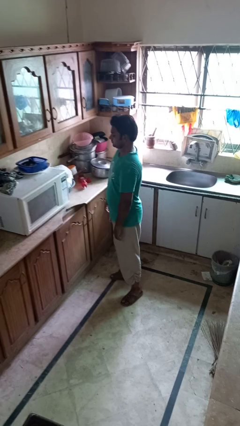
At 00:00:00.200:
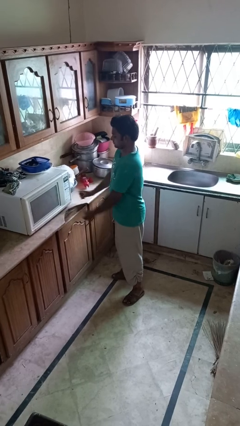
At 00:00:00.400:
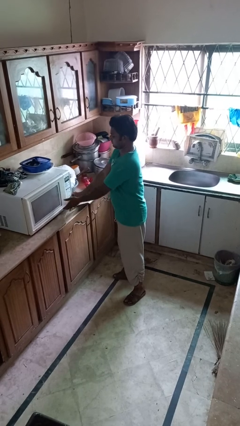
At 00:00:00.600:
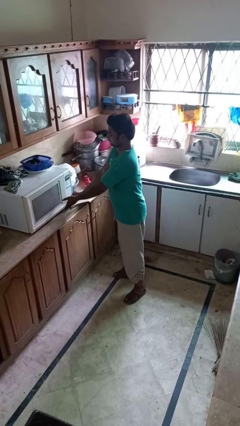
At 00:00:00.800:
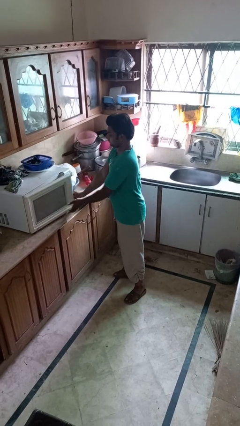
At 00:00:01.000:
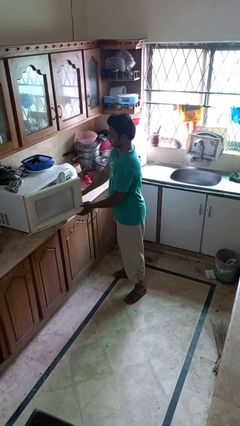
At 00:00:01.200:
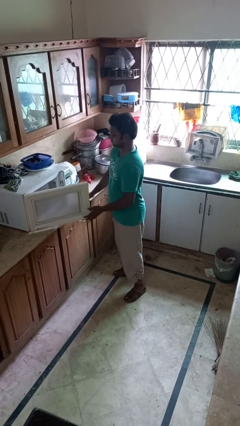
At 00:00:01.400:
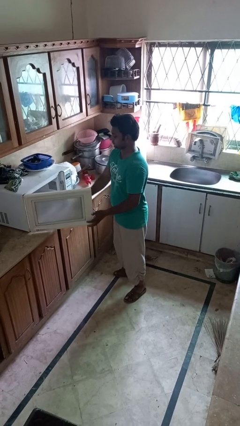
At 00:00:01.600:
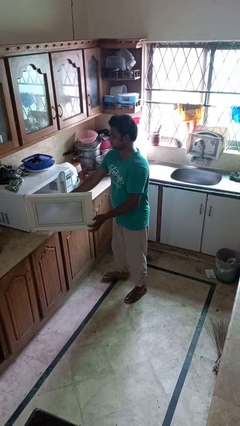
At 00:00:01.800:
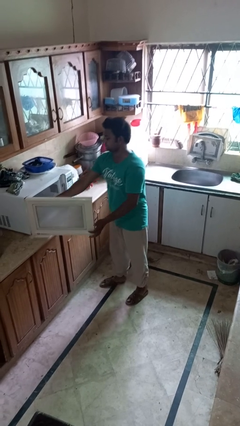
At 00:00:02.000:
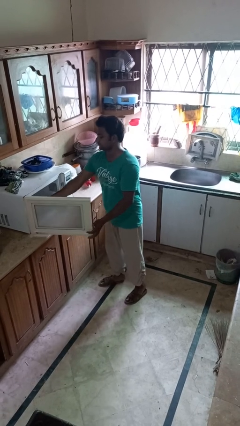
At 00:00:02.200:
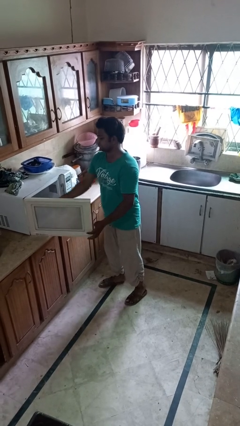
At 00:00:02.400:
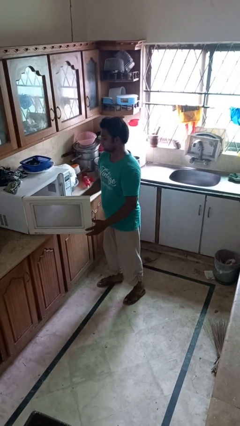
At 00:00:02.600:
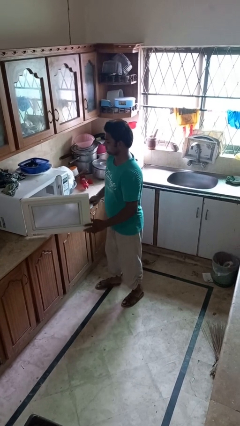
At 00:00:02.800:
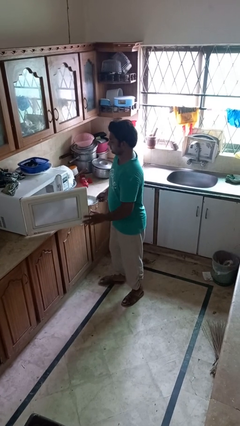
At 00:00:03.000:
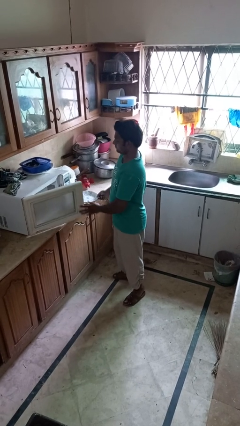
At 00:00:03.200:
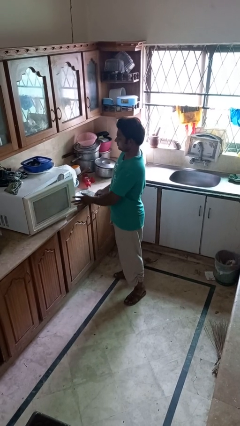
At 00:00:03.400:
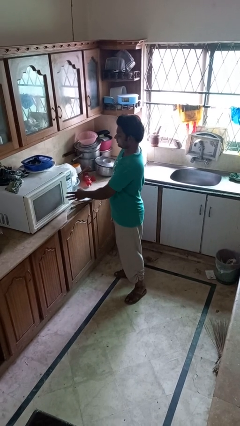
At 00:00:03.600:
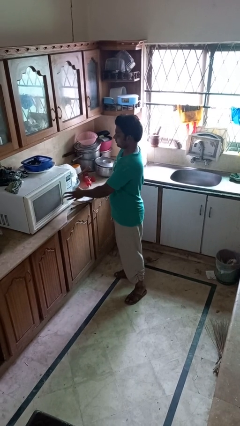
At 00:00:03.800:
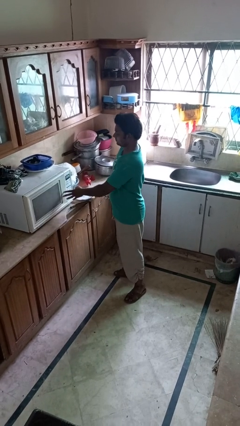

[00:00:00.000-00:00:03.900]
person takes object from microwave

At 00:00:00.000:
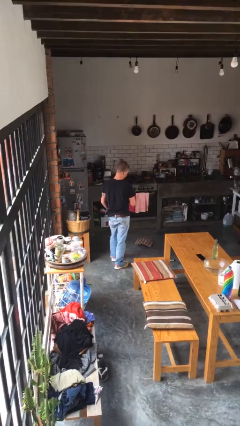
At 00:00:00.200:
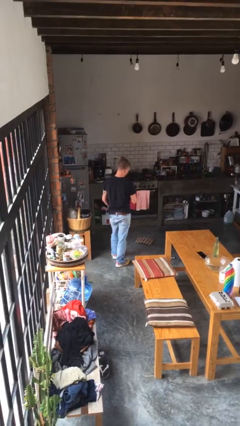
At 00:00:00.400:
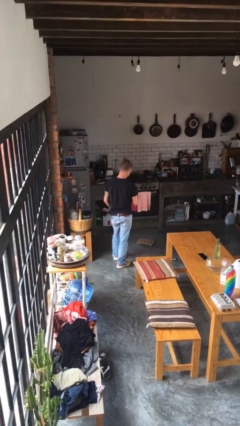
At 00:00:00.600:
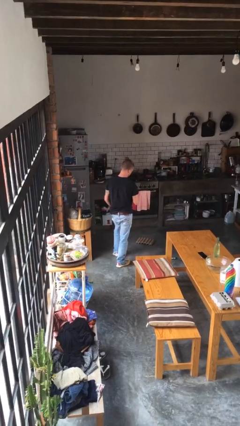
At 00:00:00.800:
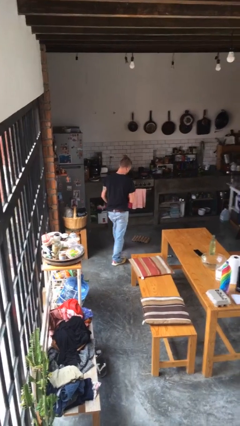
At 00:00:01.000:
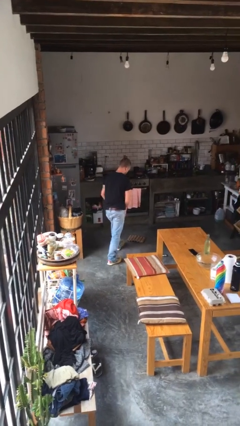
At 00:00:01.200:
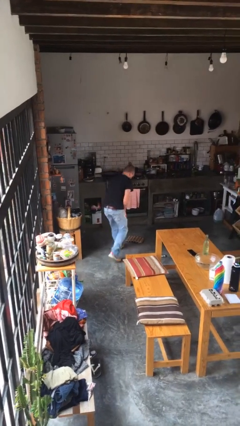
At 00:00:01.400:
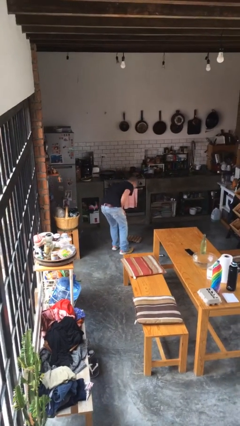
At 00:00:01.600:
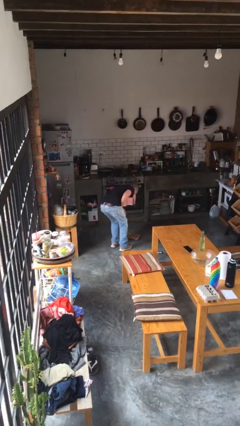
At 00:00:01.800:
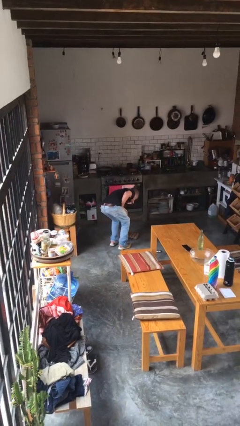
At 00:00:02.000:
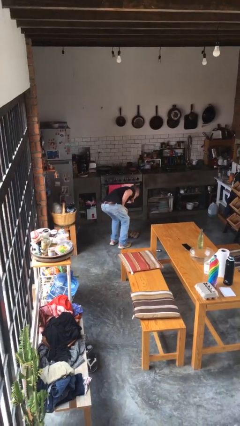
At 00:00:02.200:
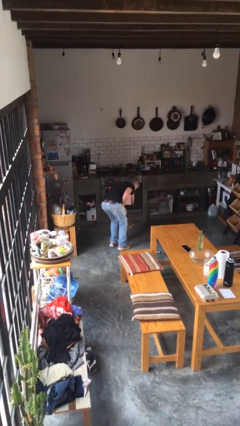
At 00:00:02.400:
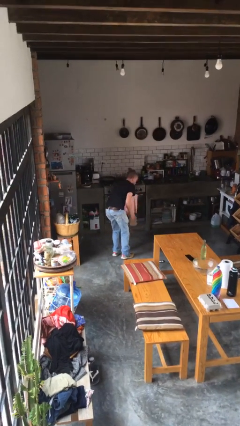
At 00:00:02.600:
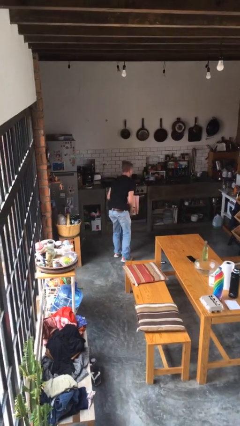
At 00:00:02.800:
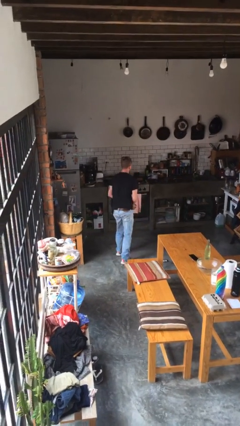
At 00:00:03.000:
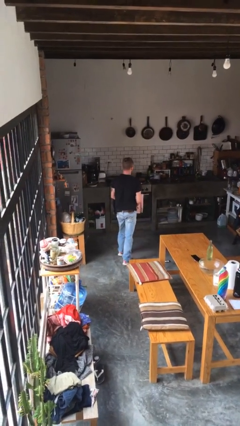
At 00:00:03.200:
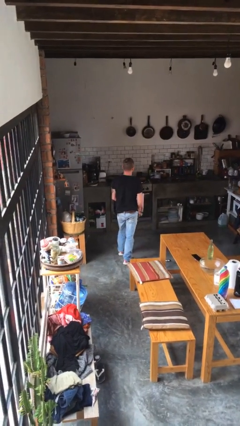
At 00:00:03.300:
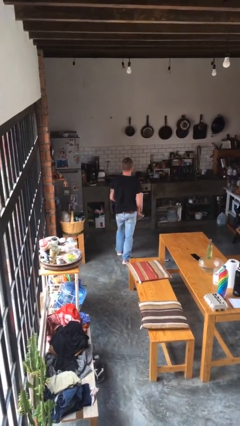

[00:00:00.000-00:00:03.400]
person picks up object from floor

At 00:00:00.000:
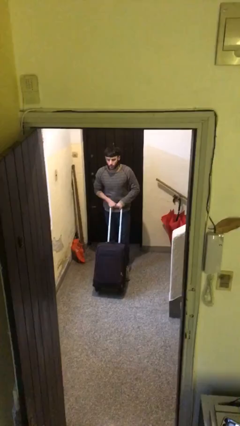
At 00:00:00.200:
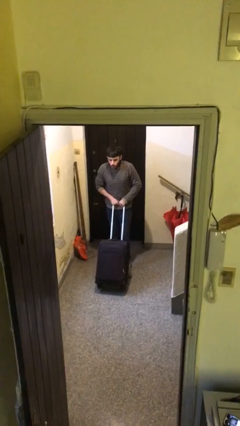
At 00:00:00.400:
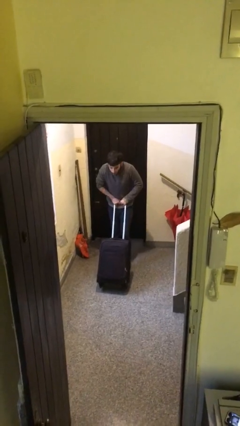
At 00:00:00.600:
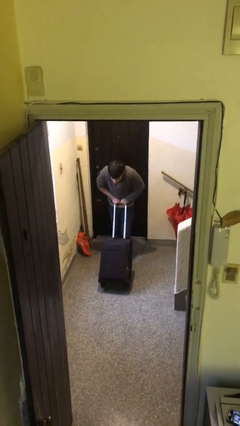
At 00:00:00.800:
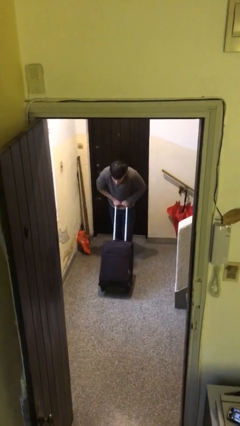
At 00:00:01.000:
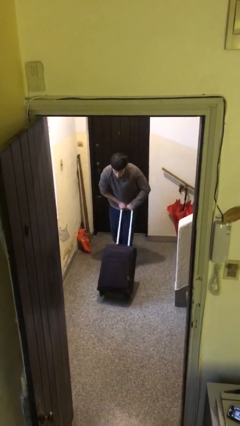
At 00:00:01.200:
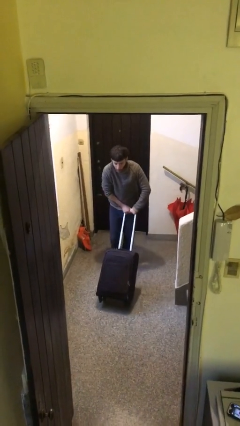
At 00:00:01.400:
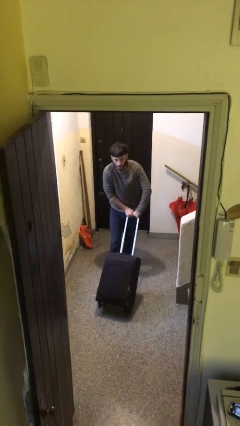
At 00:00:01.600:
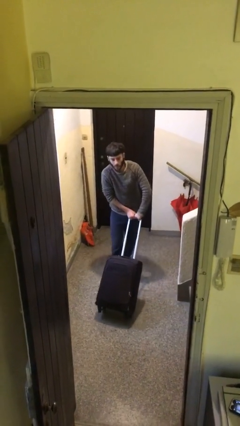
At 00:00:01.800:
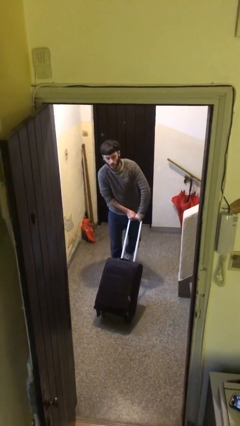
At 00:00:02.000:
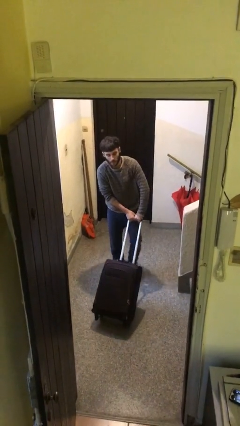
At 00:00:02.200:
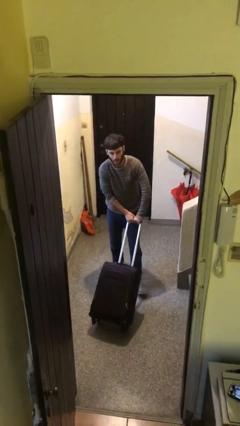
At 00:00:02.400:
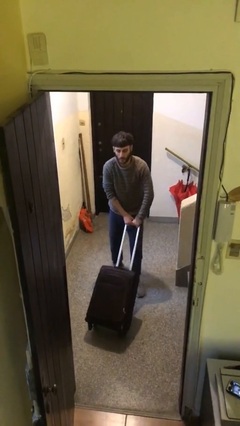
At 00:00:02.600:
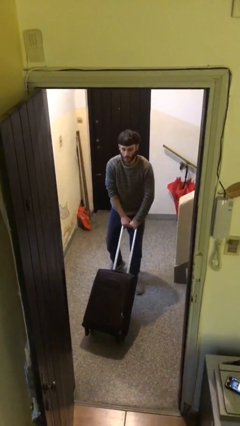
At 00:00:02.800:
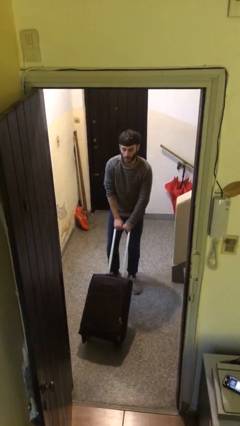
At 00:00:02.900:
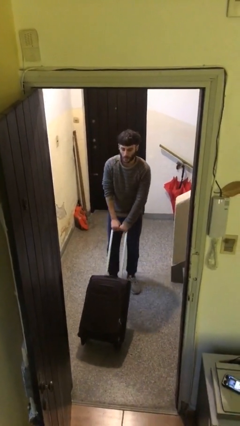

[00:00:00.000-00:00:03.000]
person pushes wheeled cart

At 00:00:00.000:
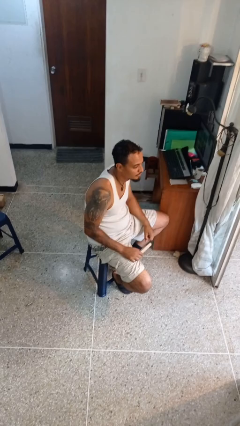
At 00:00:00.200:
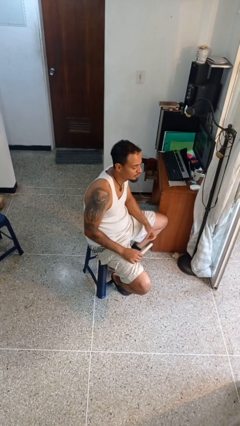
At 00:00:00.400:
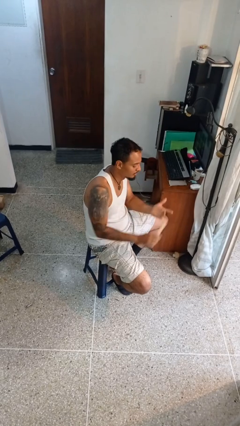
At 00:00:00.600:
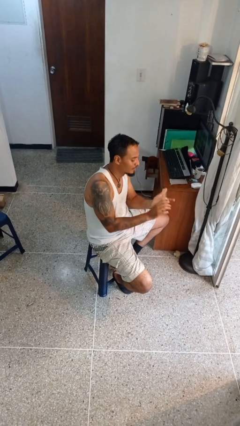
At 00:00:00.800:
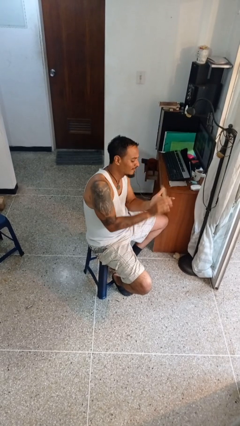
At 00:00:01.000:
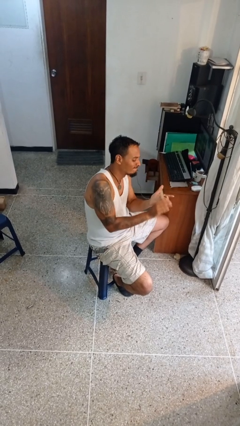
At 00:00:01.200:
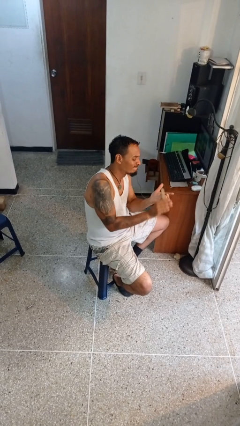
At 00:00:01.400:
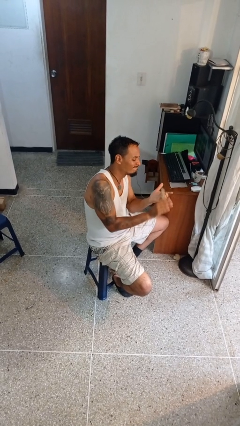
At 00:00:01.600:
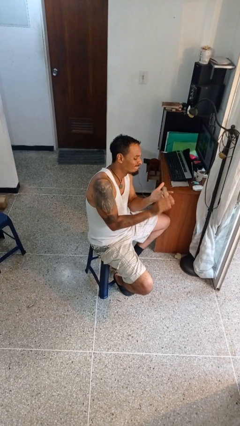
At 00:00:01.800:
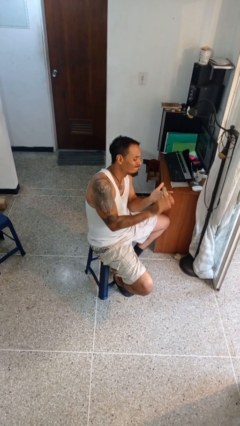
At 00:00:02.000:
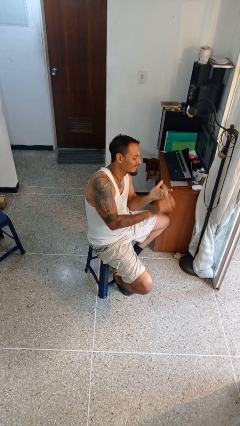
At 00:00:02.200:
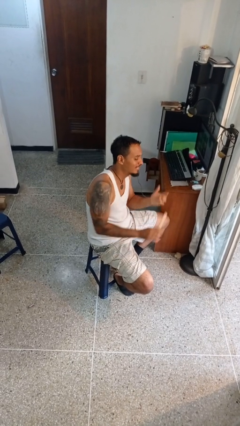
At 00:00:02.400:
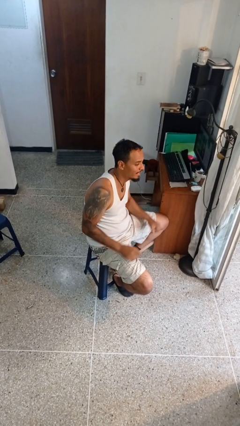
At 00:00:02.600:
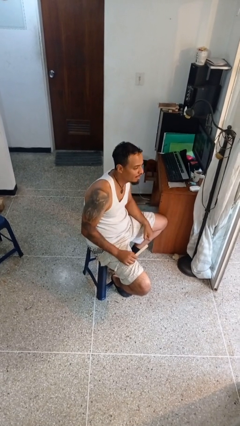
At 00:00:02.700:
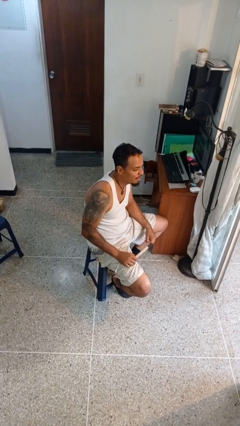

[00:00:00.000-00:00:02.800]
person files fingernails

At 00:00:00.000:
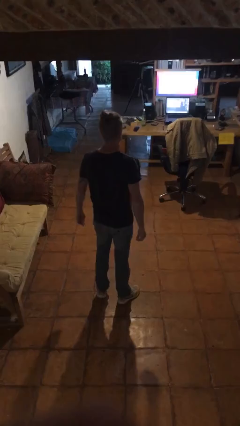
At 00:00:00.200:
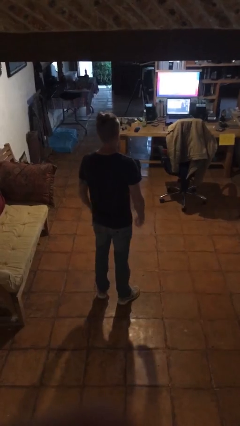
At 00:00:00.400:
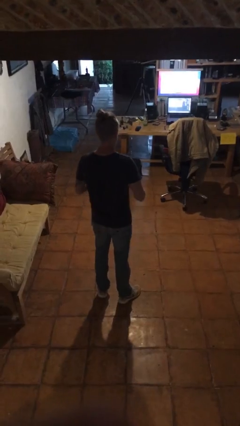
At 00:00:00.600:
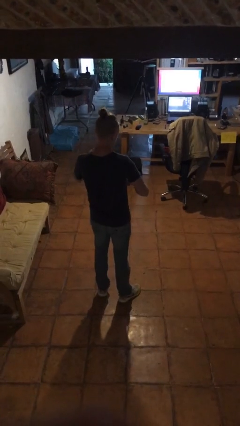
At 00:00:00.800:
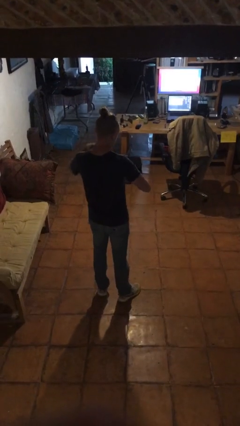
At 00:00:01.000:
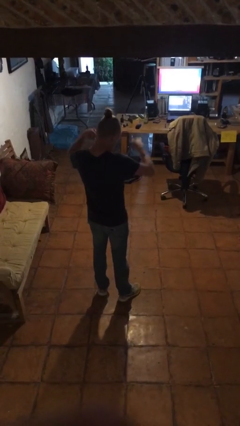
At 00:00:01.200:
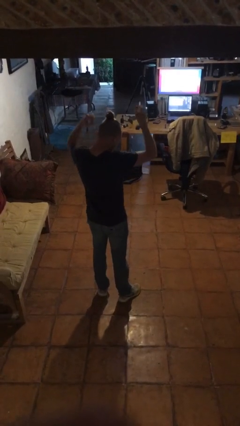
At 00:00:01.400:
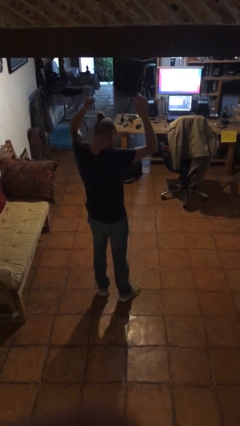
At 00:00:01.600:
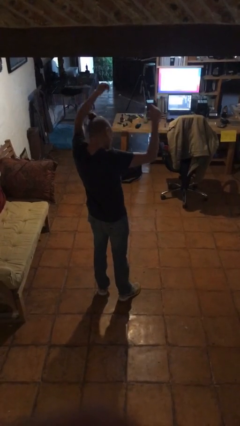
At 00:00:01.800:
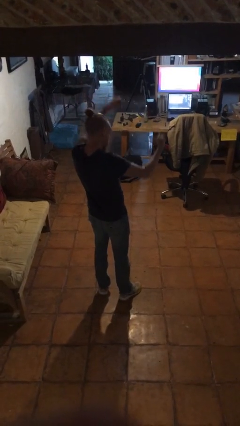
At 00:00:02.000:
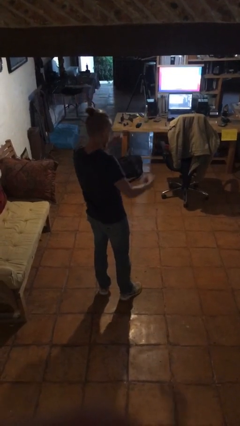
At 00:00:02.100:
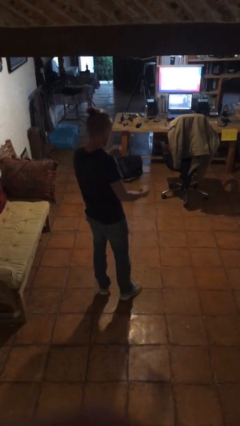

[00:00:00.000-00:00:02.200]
person takes off necklace

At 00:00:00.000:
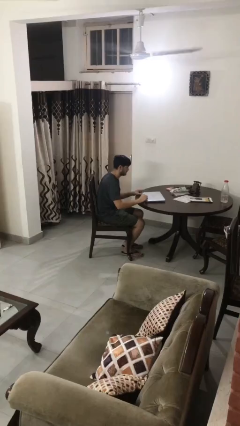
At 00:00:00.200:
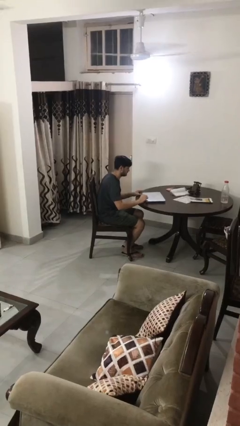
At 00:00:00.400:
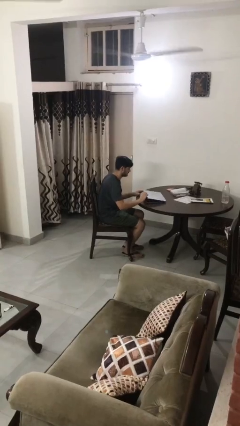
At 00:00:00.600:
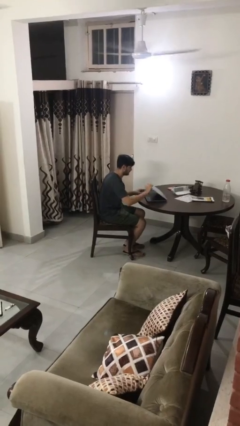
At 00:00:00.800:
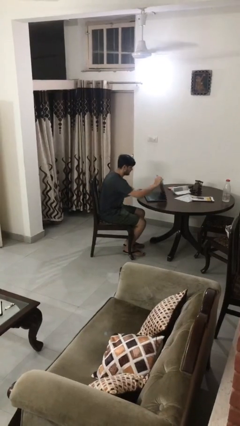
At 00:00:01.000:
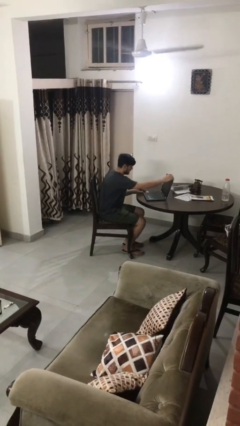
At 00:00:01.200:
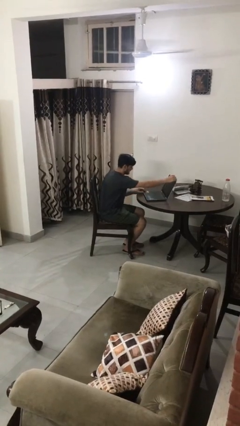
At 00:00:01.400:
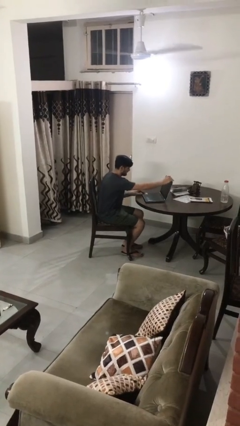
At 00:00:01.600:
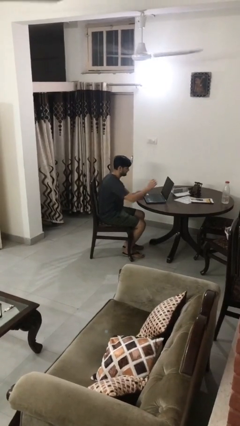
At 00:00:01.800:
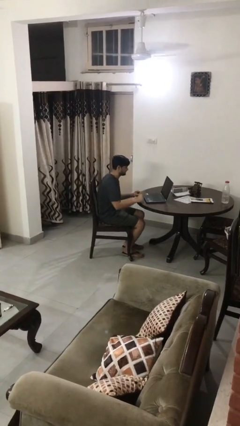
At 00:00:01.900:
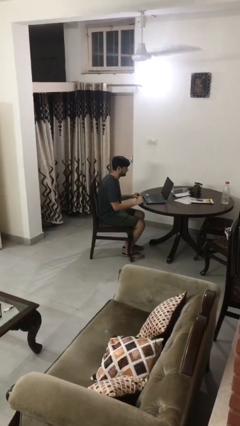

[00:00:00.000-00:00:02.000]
person opens laptop
